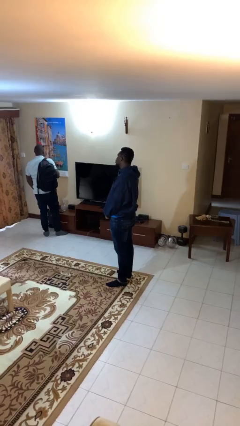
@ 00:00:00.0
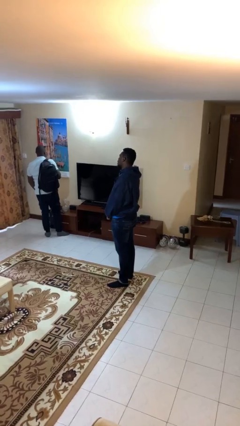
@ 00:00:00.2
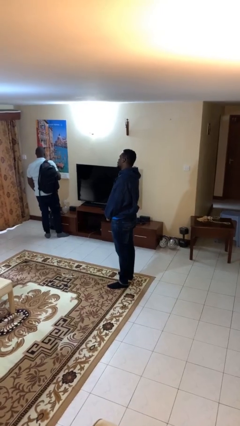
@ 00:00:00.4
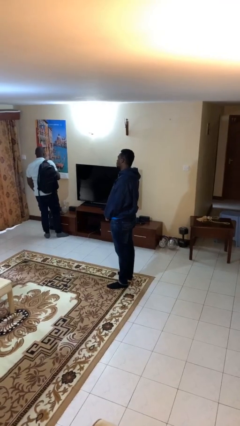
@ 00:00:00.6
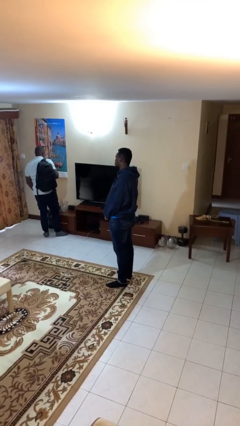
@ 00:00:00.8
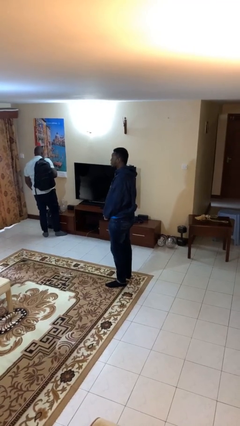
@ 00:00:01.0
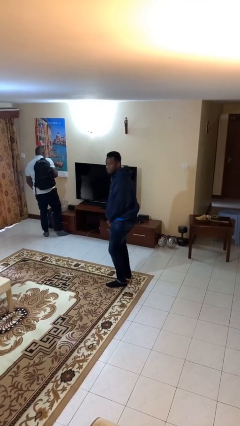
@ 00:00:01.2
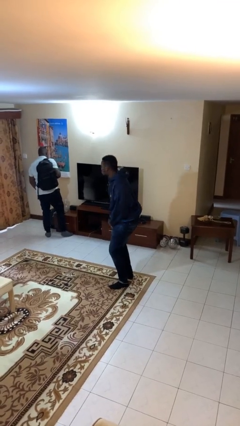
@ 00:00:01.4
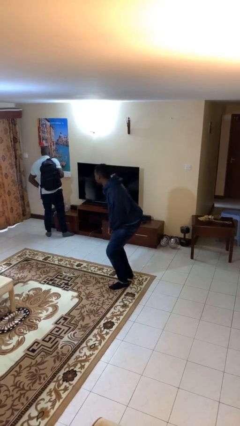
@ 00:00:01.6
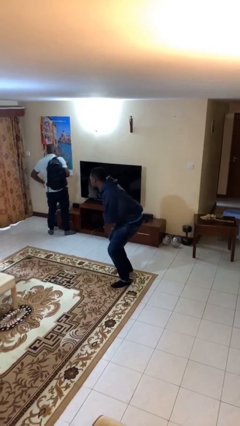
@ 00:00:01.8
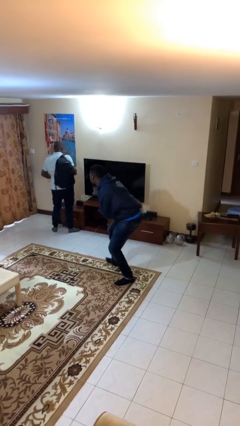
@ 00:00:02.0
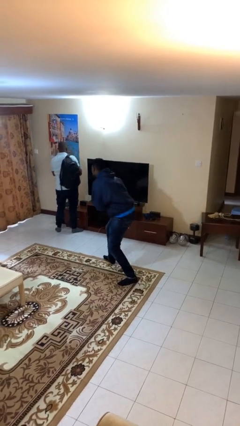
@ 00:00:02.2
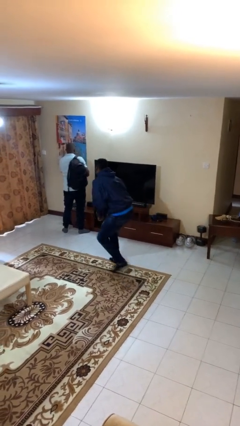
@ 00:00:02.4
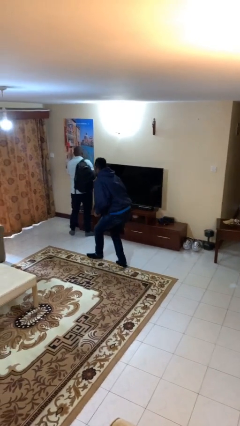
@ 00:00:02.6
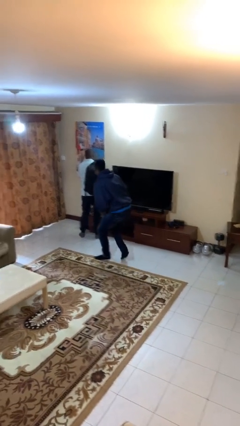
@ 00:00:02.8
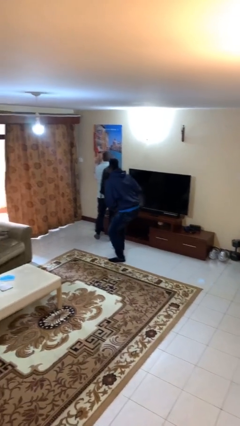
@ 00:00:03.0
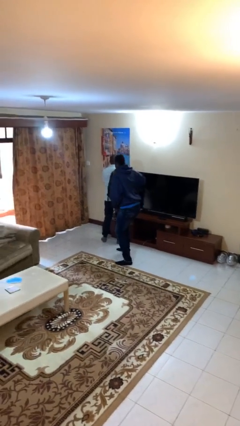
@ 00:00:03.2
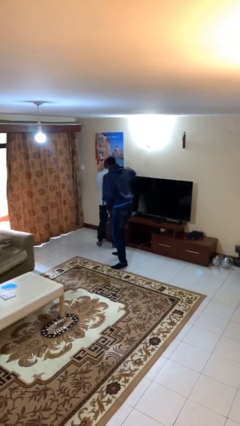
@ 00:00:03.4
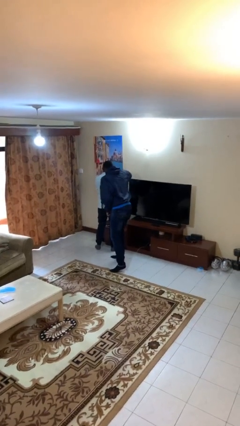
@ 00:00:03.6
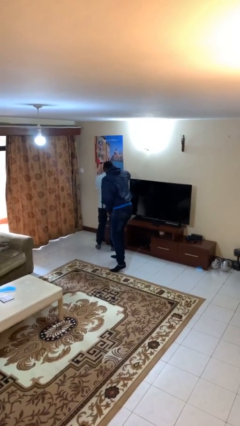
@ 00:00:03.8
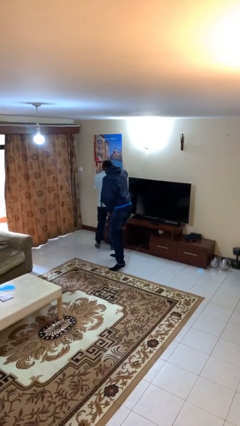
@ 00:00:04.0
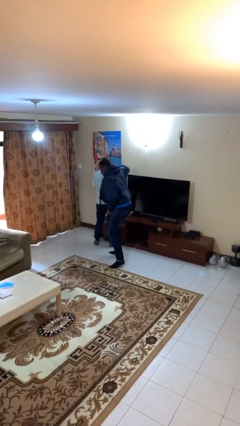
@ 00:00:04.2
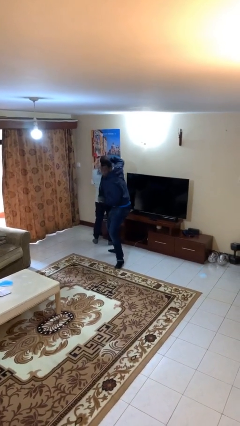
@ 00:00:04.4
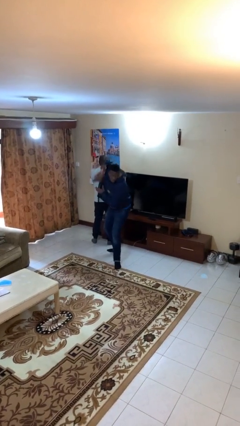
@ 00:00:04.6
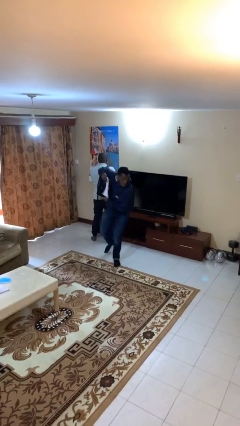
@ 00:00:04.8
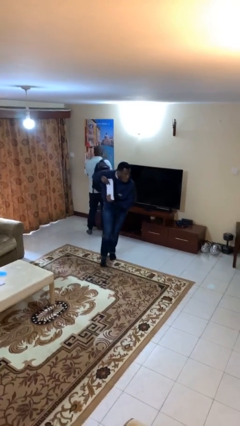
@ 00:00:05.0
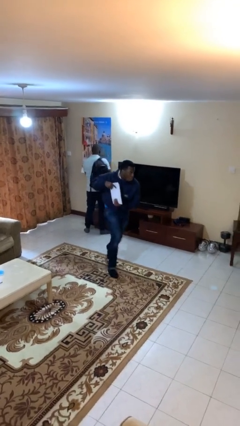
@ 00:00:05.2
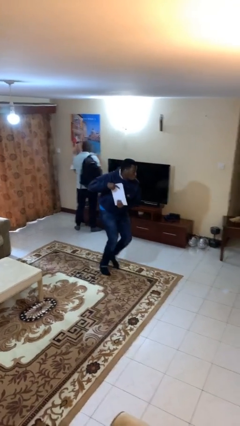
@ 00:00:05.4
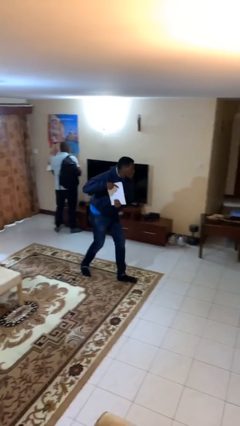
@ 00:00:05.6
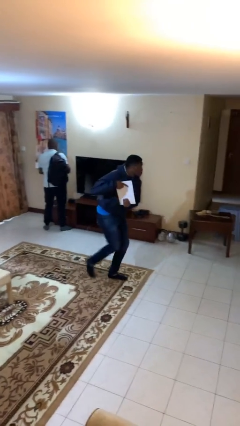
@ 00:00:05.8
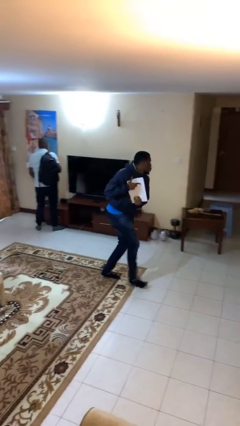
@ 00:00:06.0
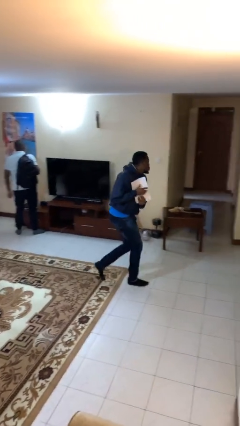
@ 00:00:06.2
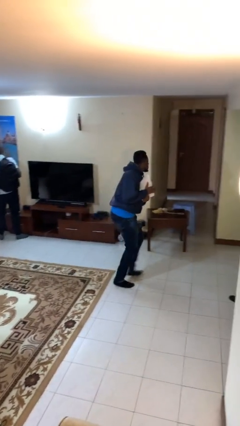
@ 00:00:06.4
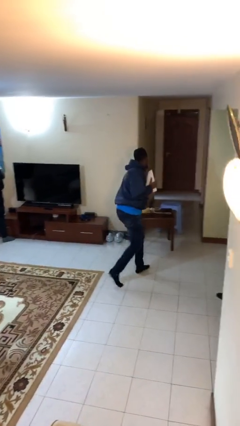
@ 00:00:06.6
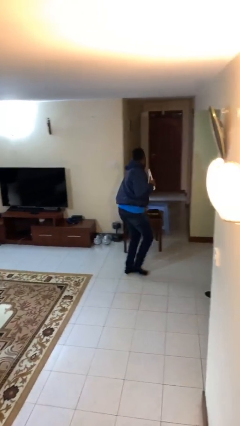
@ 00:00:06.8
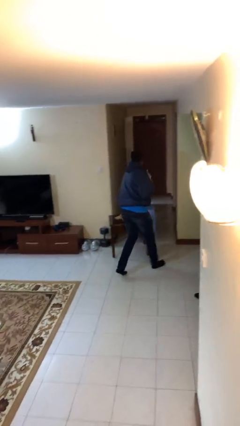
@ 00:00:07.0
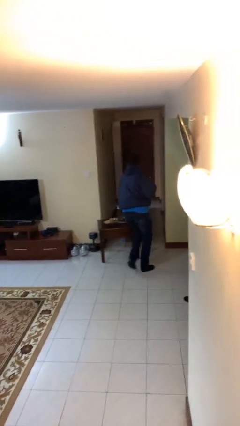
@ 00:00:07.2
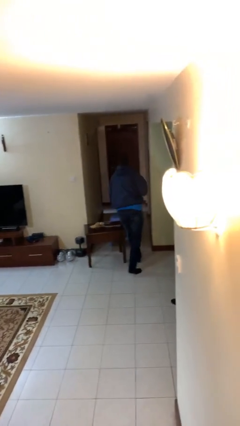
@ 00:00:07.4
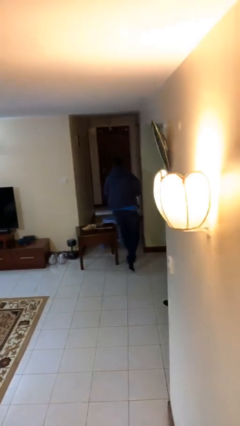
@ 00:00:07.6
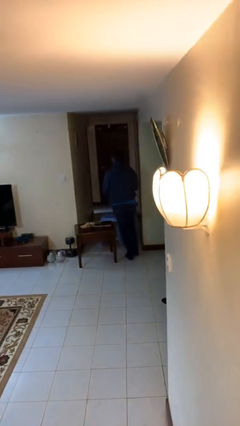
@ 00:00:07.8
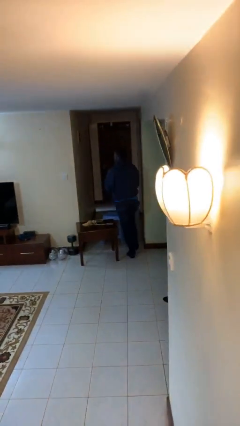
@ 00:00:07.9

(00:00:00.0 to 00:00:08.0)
person steals object from person

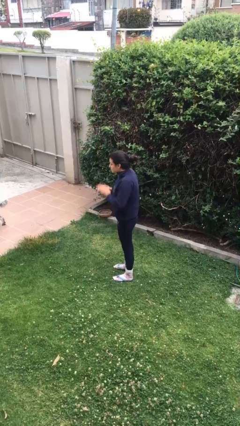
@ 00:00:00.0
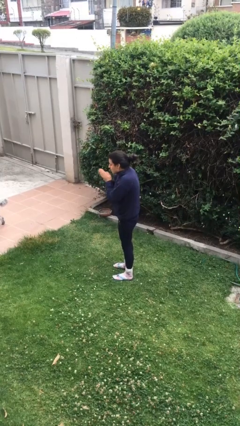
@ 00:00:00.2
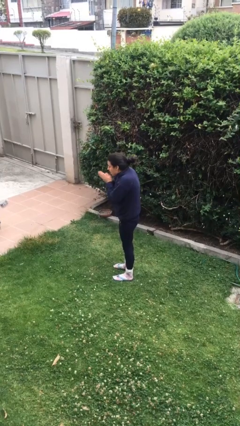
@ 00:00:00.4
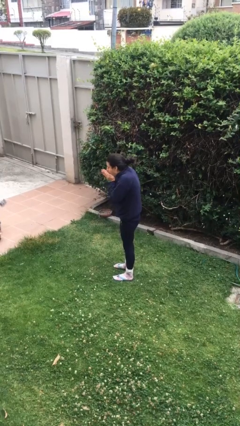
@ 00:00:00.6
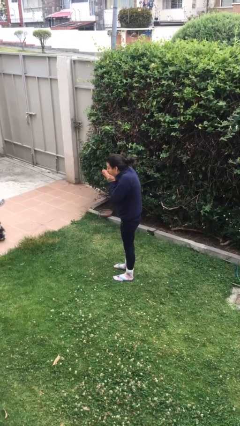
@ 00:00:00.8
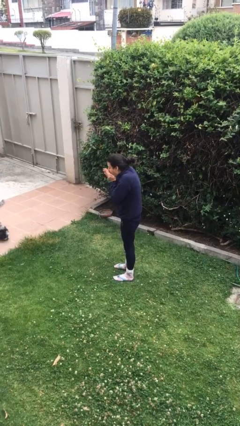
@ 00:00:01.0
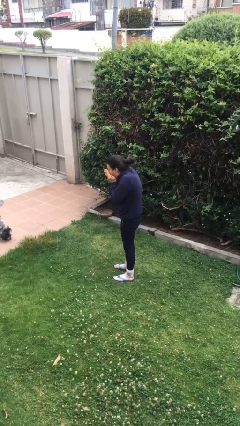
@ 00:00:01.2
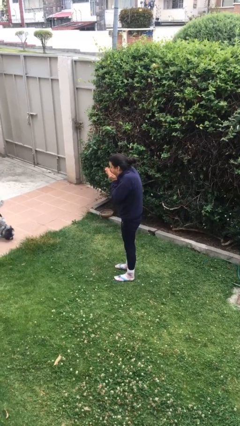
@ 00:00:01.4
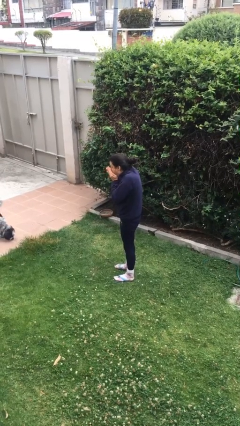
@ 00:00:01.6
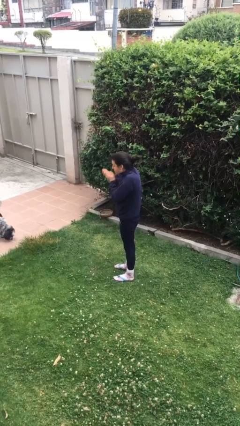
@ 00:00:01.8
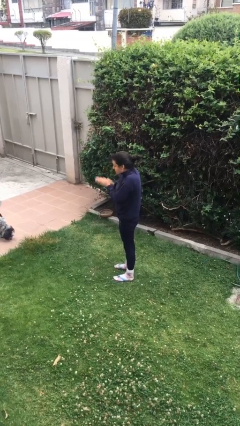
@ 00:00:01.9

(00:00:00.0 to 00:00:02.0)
person blows into hands

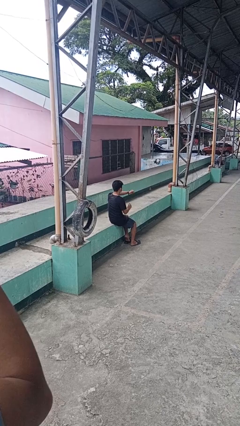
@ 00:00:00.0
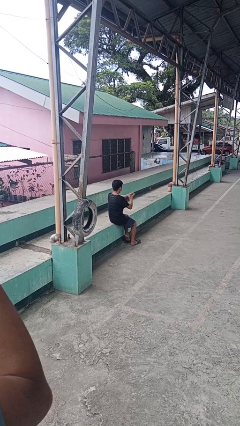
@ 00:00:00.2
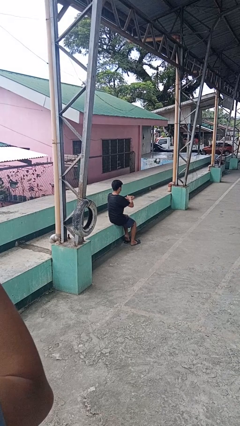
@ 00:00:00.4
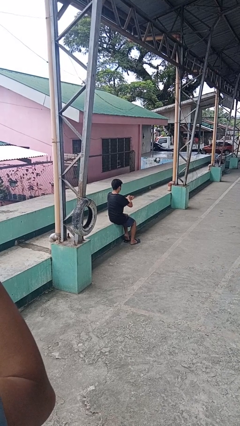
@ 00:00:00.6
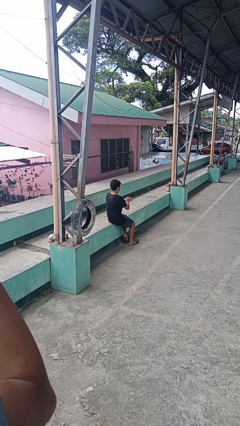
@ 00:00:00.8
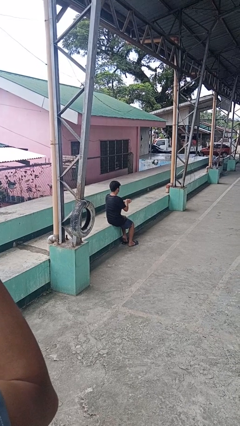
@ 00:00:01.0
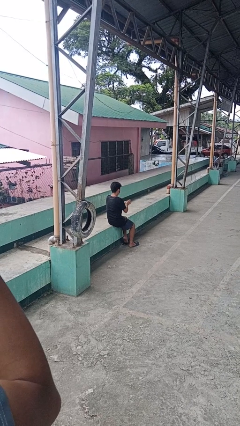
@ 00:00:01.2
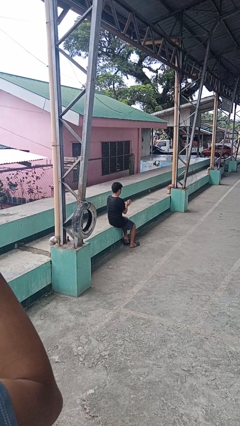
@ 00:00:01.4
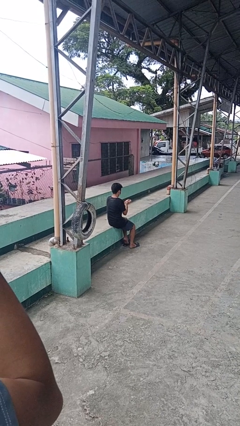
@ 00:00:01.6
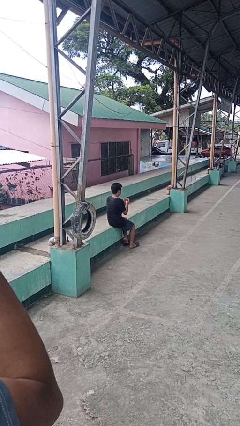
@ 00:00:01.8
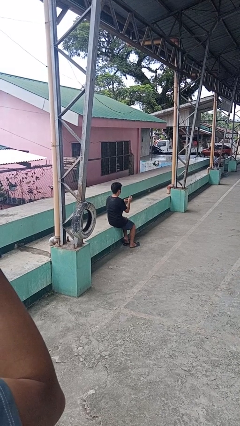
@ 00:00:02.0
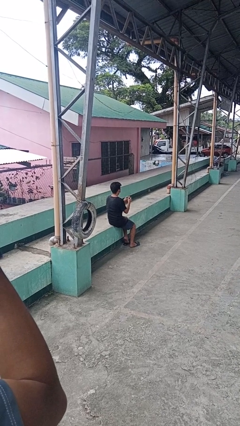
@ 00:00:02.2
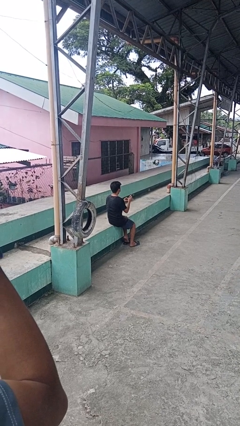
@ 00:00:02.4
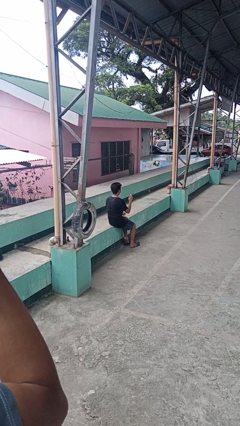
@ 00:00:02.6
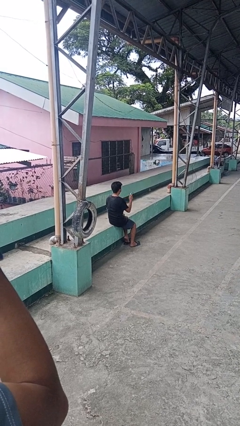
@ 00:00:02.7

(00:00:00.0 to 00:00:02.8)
person takes off wristwatch

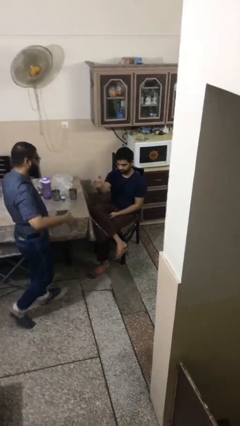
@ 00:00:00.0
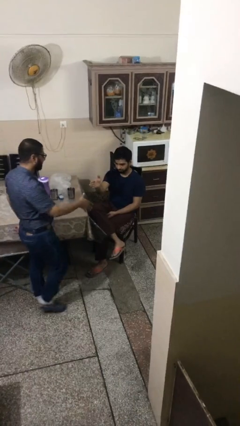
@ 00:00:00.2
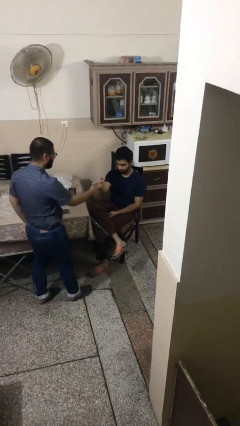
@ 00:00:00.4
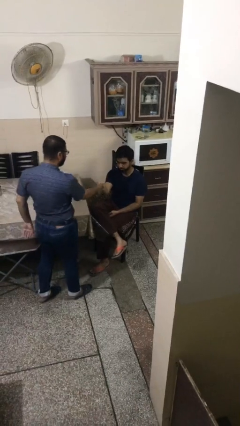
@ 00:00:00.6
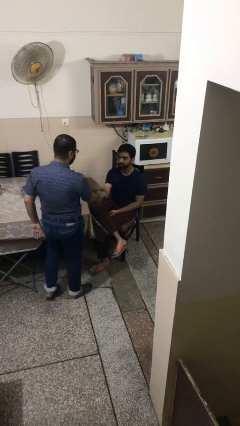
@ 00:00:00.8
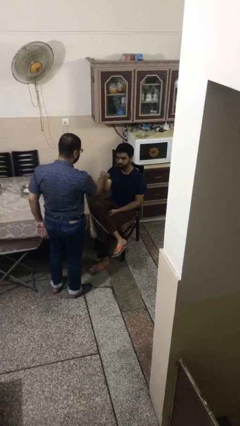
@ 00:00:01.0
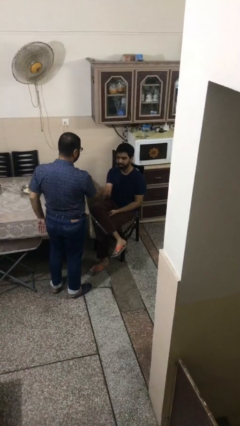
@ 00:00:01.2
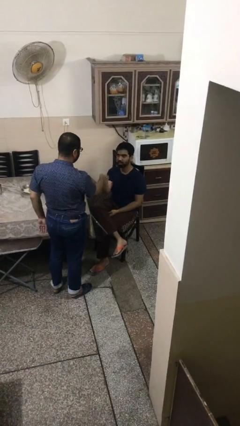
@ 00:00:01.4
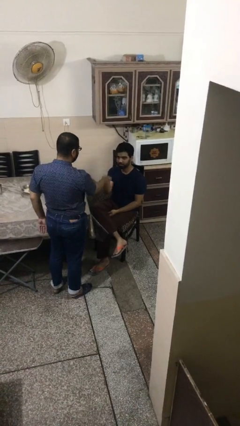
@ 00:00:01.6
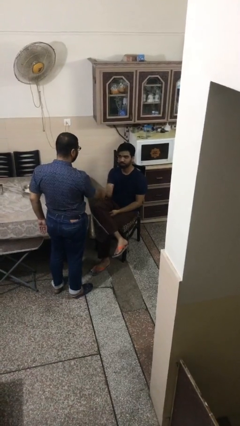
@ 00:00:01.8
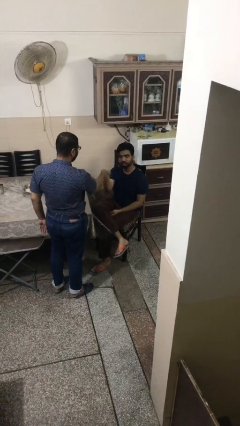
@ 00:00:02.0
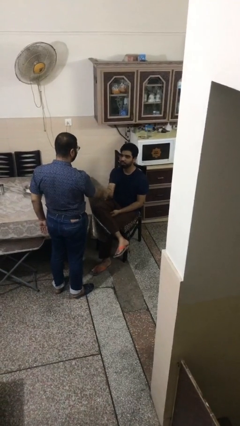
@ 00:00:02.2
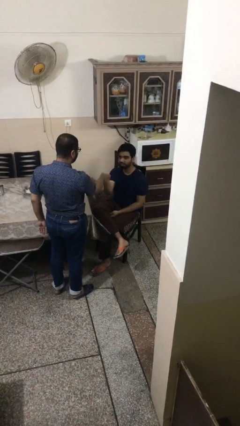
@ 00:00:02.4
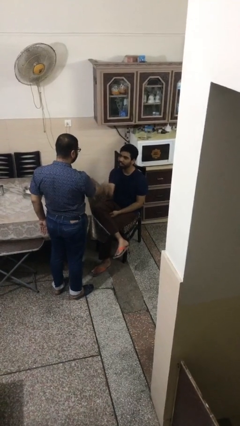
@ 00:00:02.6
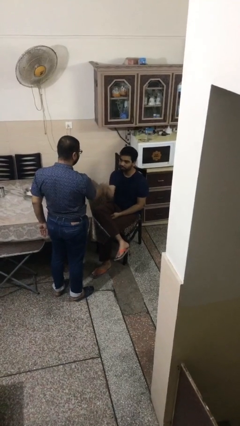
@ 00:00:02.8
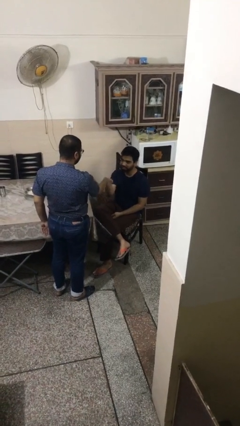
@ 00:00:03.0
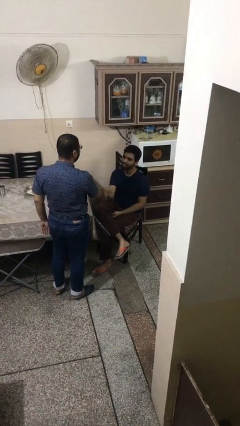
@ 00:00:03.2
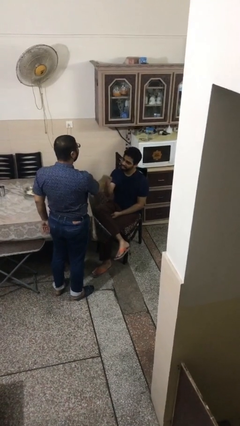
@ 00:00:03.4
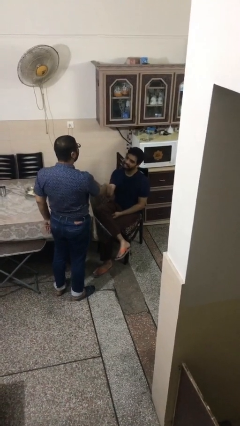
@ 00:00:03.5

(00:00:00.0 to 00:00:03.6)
person shakes hand
